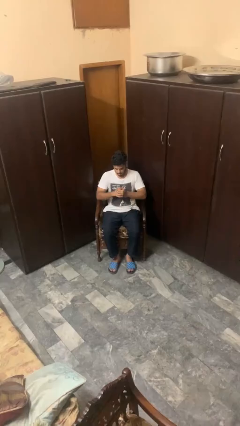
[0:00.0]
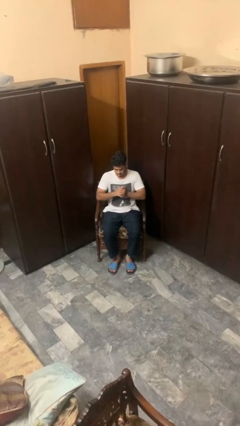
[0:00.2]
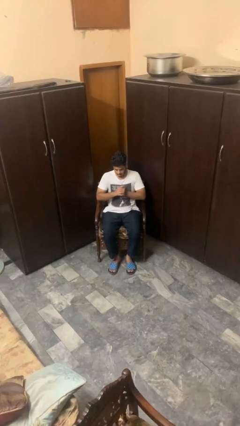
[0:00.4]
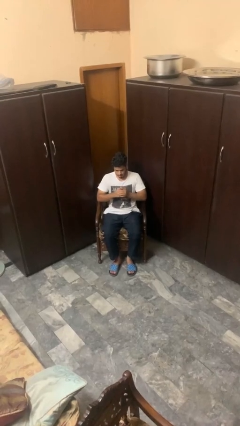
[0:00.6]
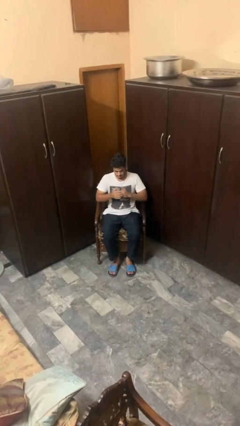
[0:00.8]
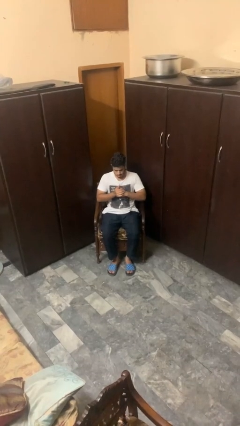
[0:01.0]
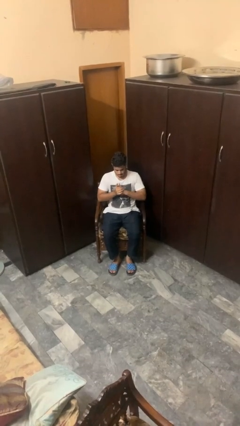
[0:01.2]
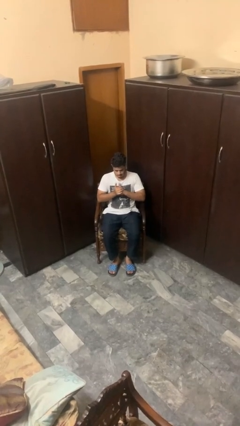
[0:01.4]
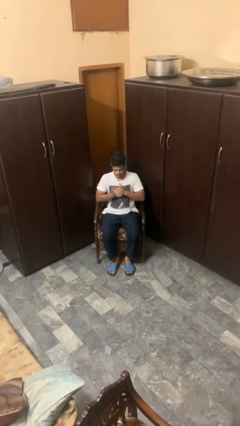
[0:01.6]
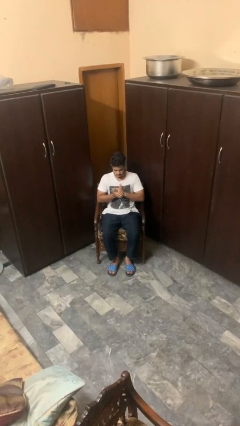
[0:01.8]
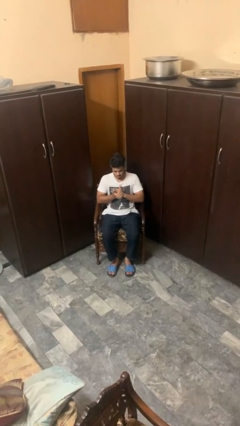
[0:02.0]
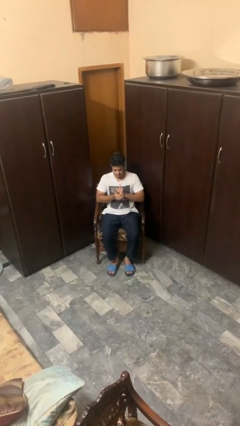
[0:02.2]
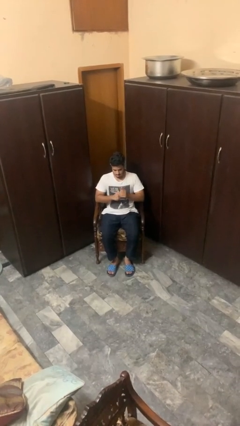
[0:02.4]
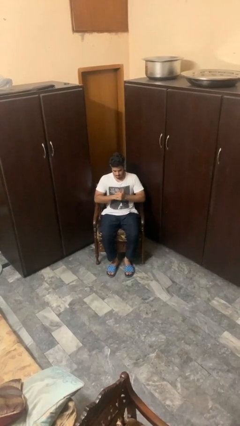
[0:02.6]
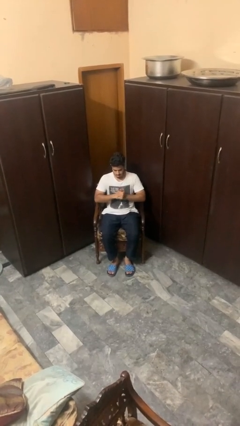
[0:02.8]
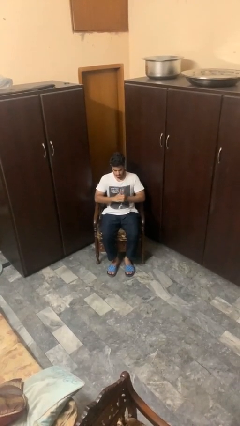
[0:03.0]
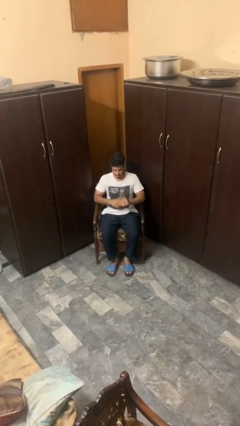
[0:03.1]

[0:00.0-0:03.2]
person cracks knuckles

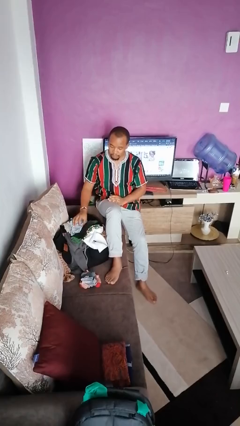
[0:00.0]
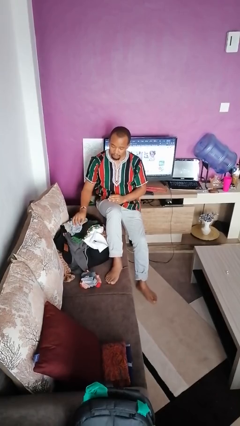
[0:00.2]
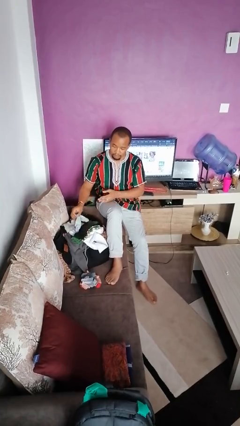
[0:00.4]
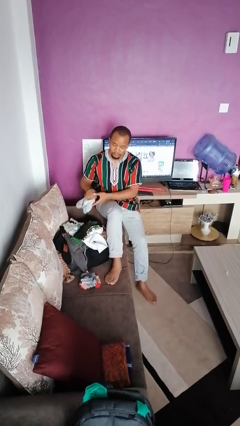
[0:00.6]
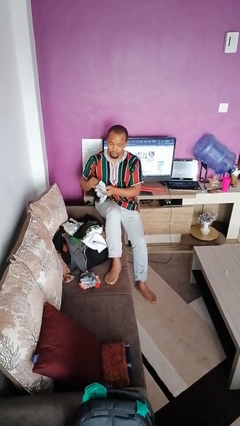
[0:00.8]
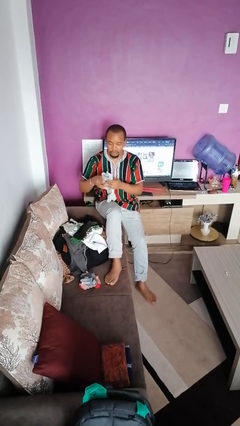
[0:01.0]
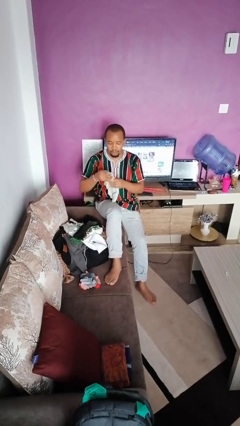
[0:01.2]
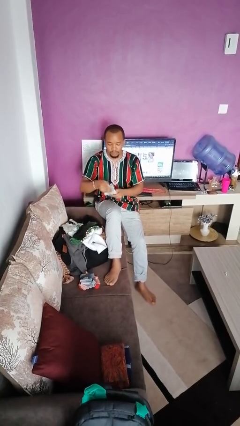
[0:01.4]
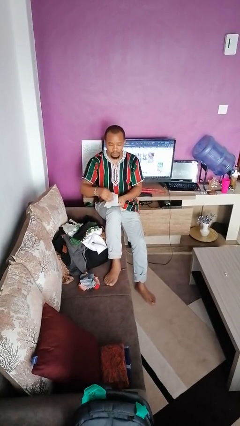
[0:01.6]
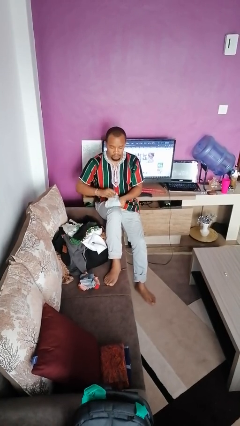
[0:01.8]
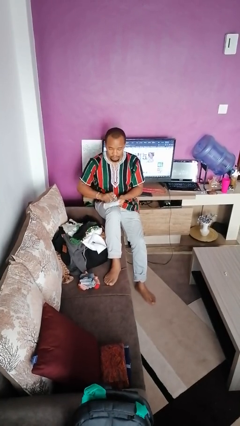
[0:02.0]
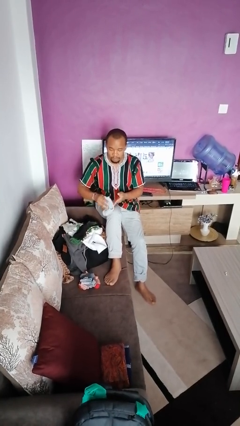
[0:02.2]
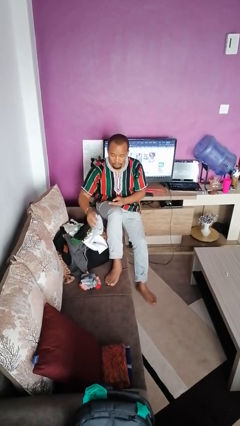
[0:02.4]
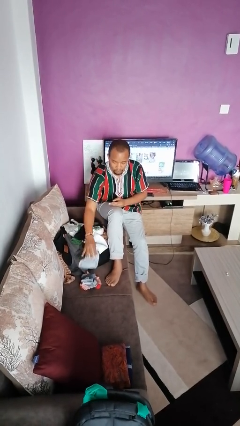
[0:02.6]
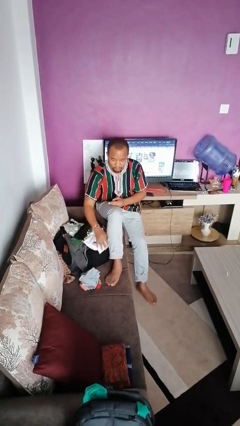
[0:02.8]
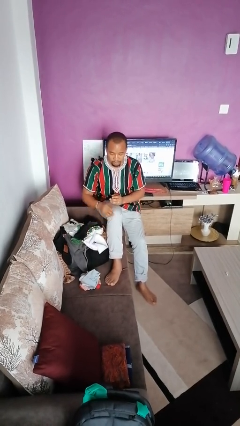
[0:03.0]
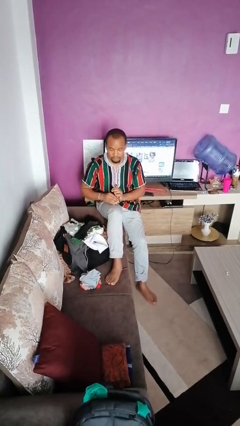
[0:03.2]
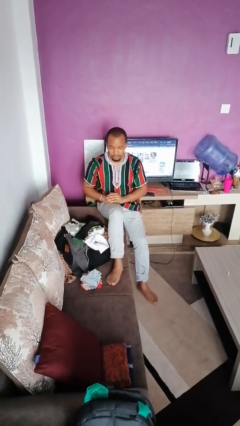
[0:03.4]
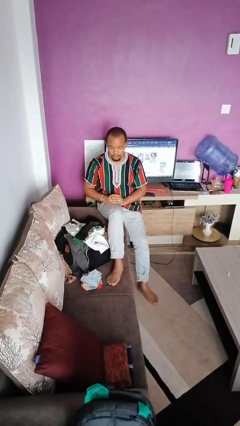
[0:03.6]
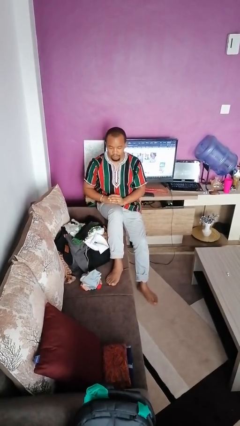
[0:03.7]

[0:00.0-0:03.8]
person folds socks

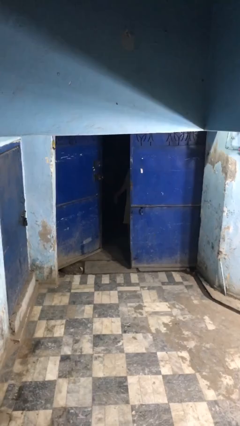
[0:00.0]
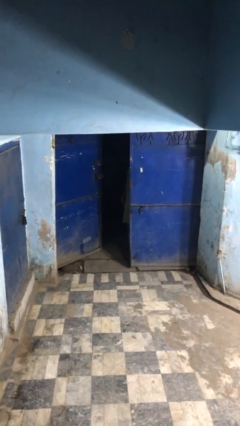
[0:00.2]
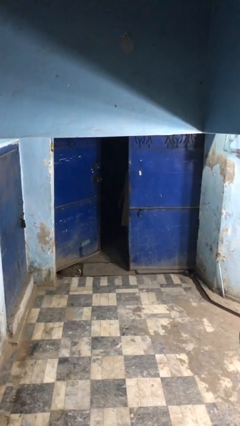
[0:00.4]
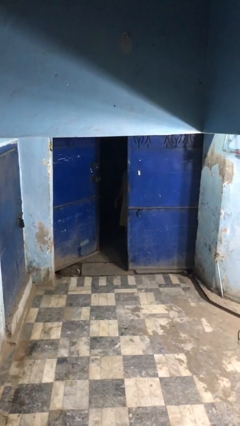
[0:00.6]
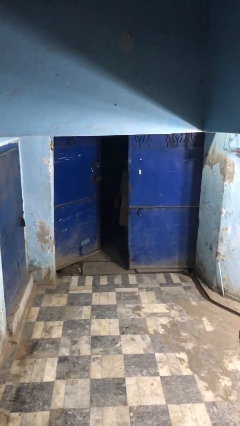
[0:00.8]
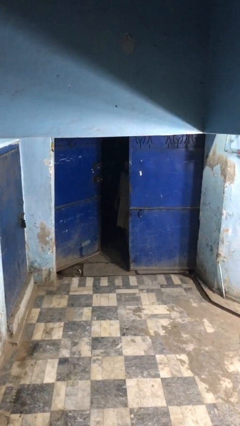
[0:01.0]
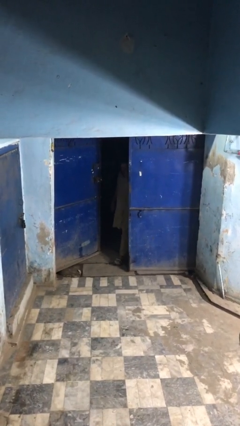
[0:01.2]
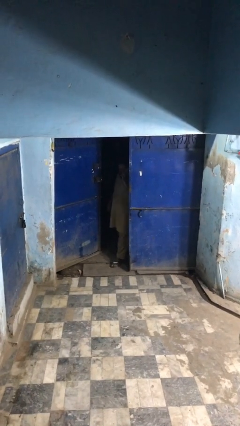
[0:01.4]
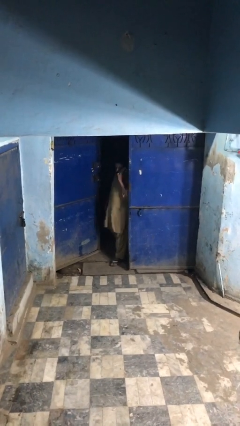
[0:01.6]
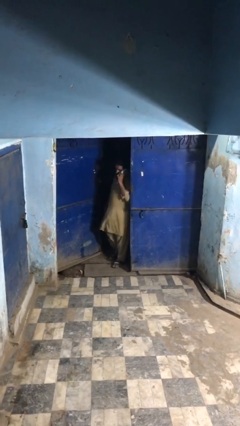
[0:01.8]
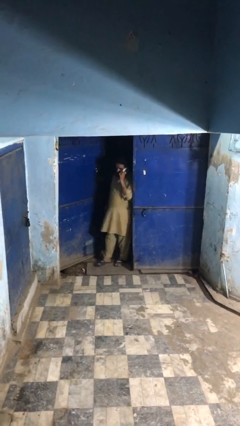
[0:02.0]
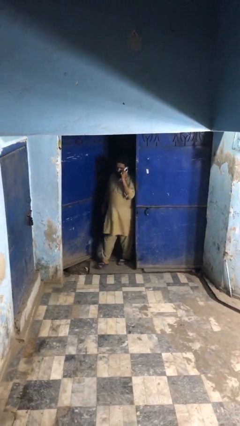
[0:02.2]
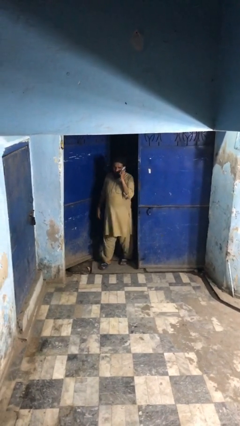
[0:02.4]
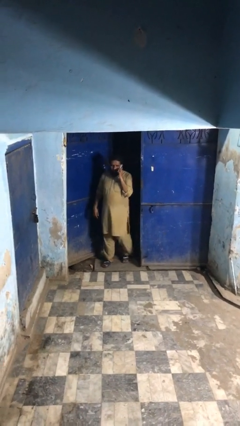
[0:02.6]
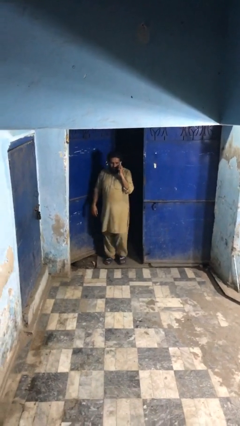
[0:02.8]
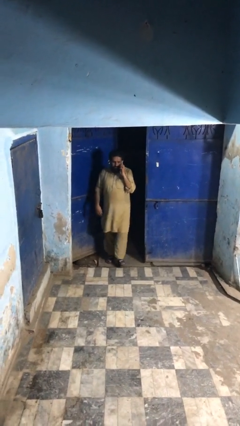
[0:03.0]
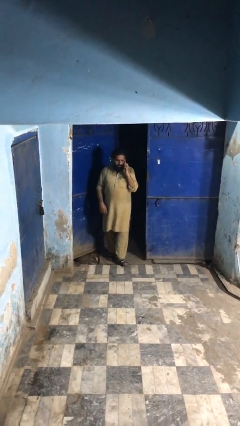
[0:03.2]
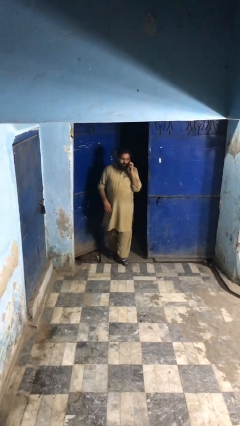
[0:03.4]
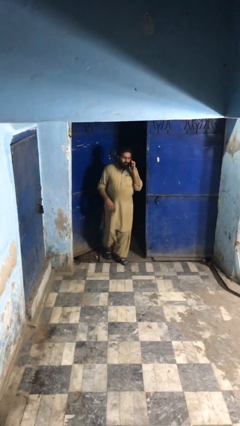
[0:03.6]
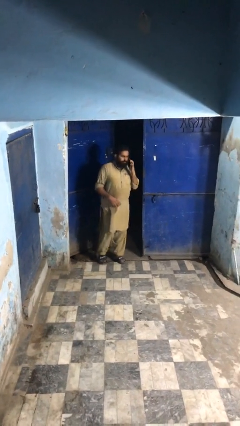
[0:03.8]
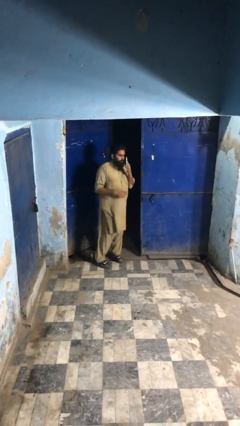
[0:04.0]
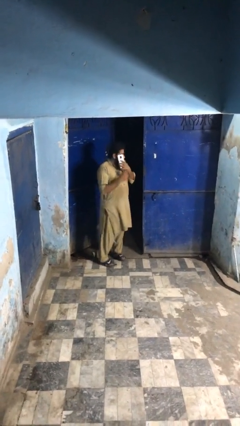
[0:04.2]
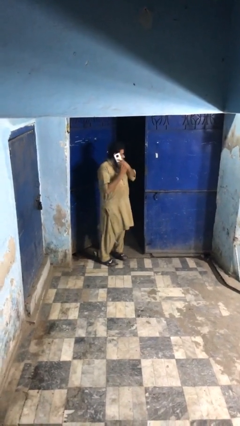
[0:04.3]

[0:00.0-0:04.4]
person enters scene through structure

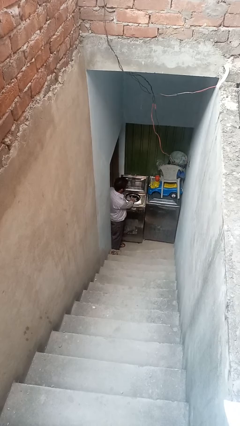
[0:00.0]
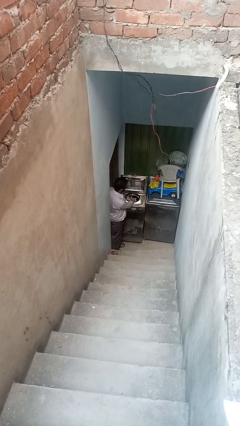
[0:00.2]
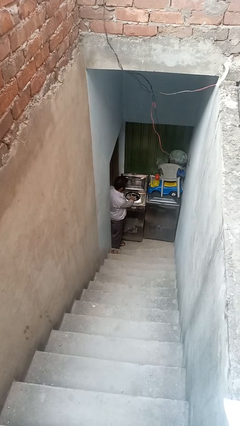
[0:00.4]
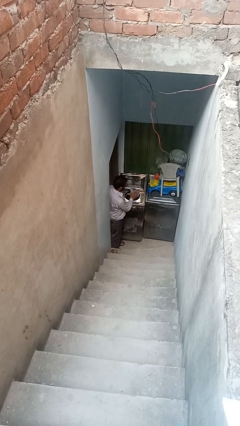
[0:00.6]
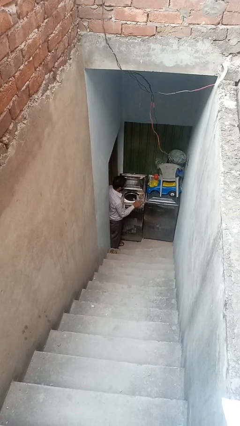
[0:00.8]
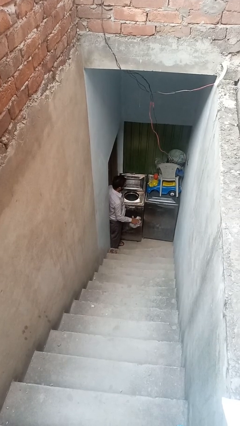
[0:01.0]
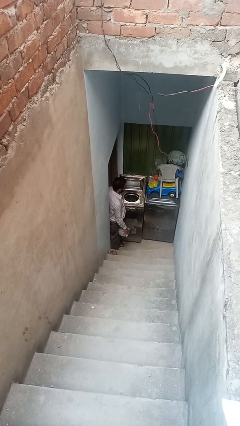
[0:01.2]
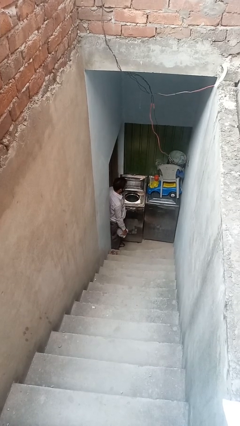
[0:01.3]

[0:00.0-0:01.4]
person unloads clotheswasher

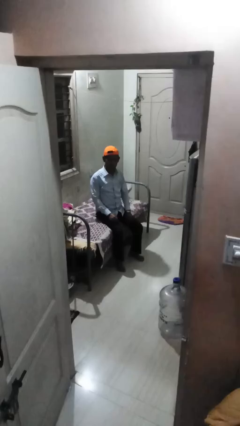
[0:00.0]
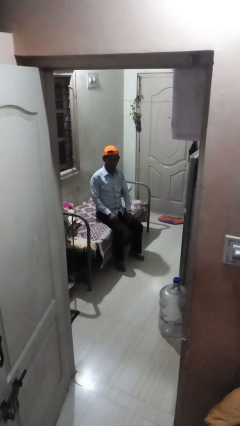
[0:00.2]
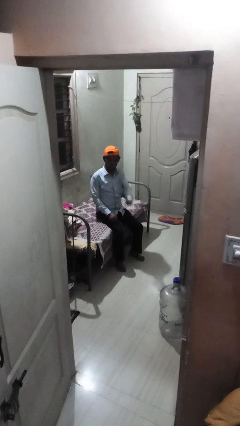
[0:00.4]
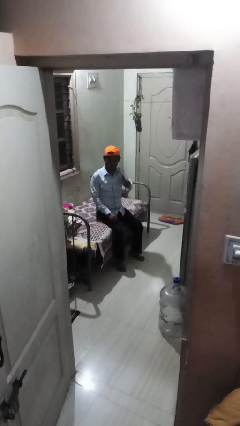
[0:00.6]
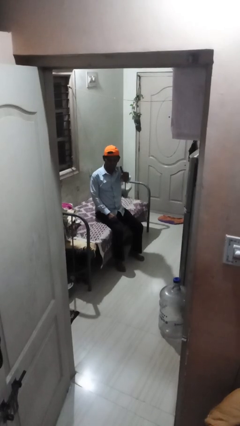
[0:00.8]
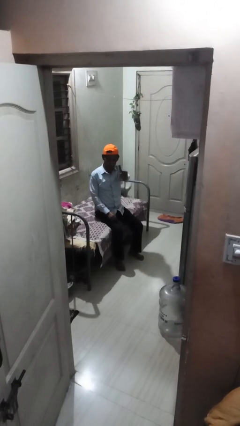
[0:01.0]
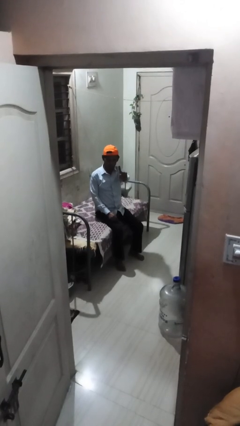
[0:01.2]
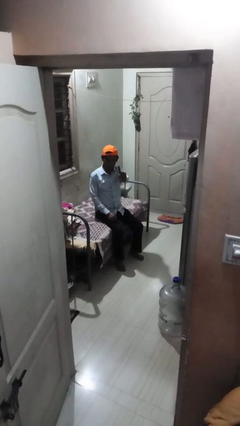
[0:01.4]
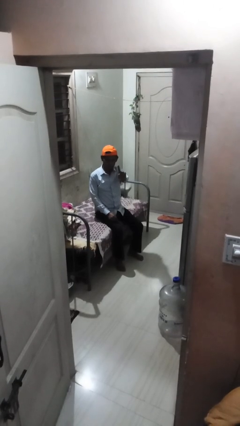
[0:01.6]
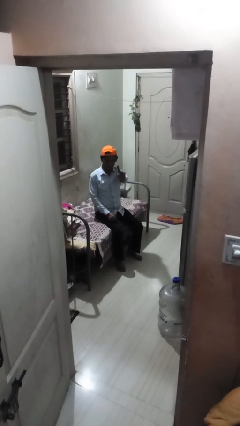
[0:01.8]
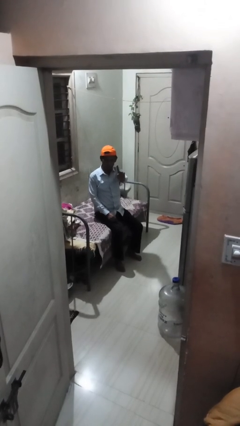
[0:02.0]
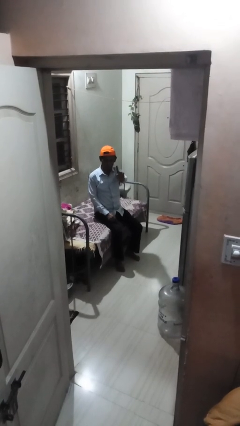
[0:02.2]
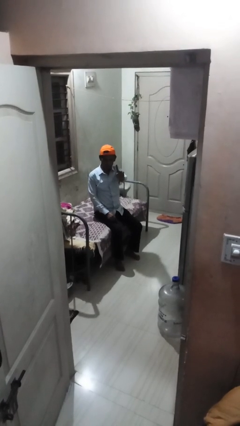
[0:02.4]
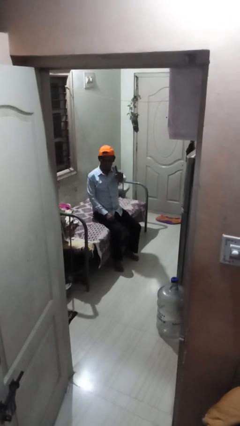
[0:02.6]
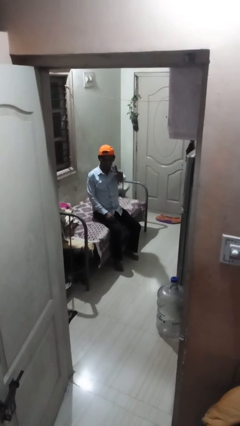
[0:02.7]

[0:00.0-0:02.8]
person gestures number one

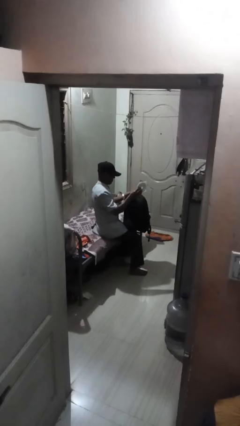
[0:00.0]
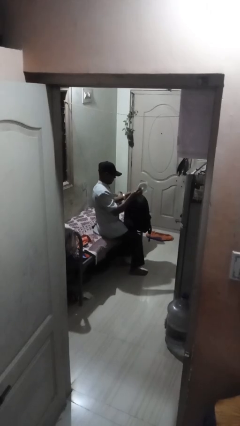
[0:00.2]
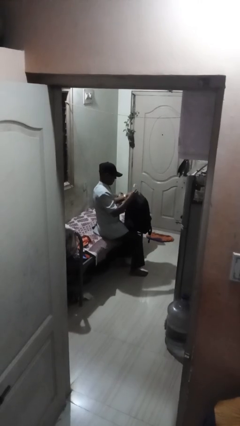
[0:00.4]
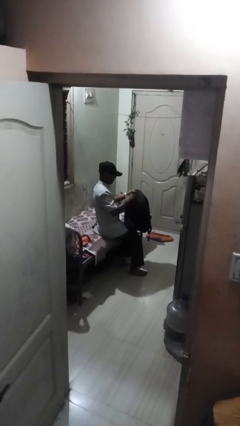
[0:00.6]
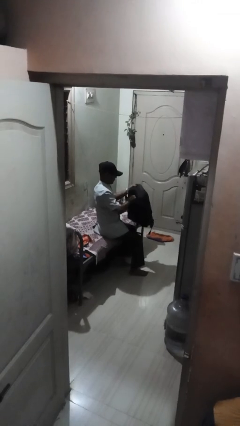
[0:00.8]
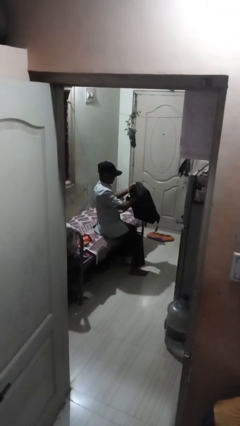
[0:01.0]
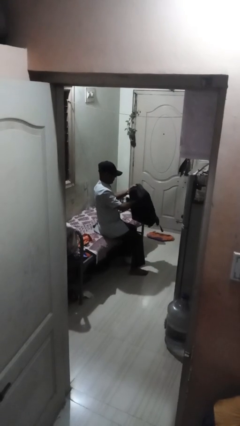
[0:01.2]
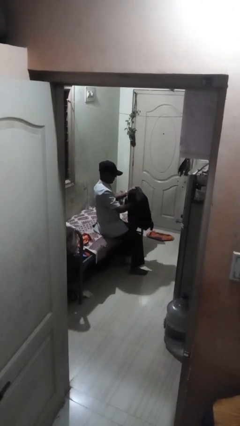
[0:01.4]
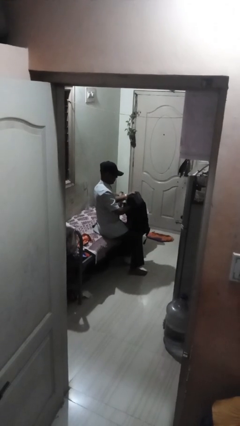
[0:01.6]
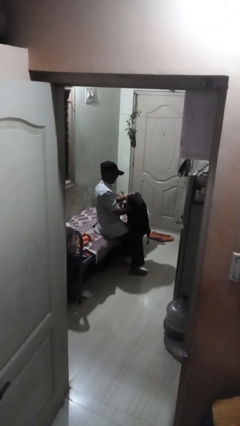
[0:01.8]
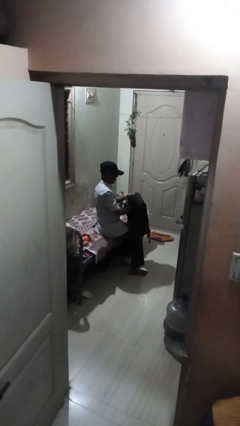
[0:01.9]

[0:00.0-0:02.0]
person puts object into backpack
